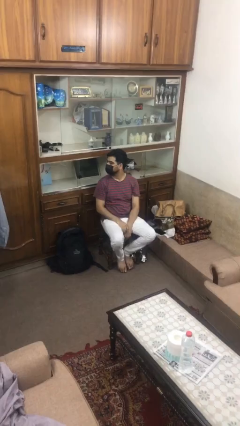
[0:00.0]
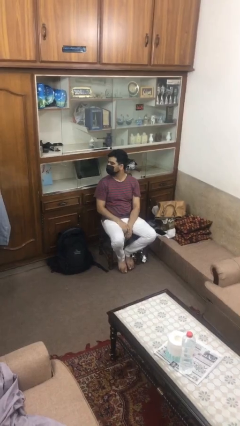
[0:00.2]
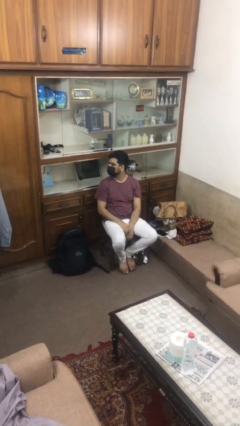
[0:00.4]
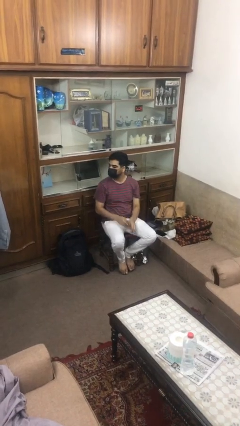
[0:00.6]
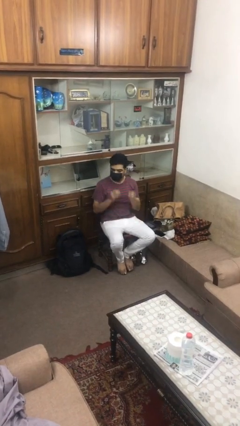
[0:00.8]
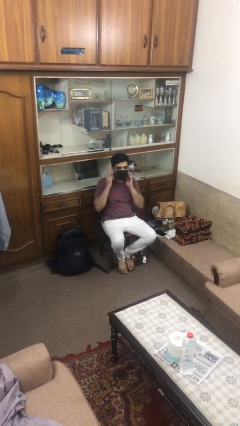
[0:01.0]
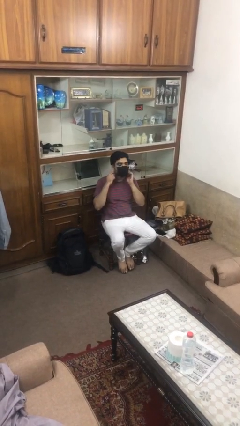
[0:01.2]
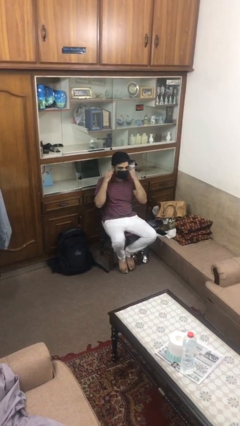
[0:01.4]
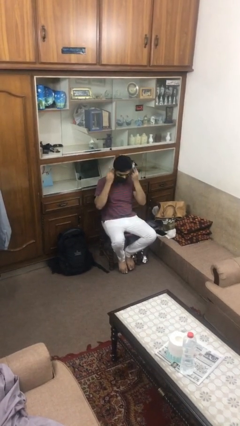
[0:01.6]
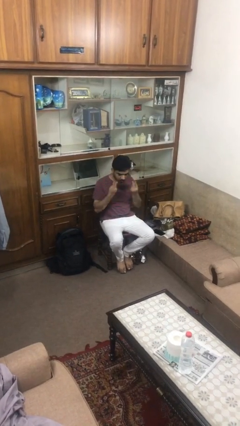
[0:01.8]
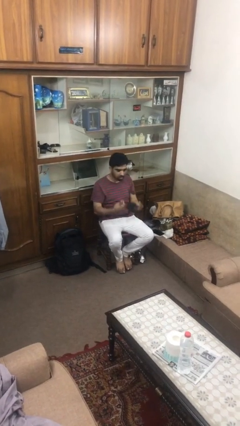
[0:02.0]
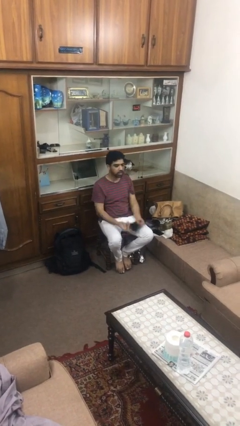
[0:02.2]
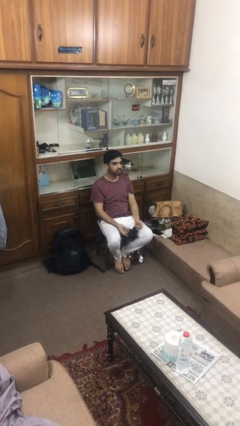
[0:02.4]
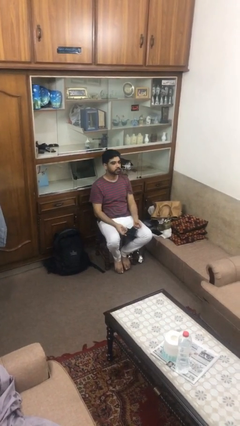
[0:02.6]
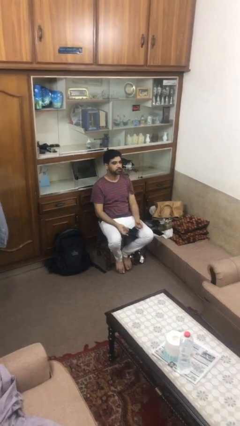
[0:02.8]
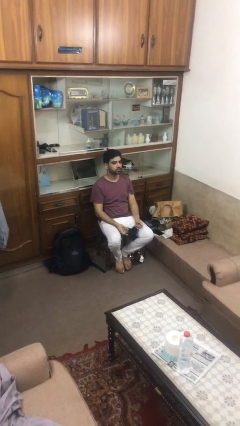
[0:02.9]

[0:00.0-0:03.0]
person takes off facemask

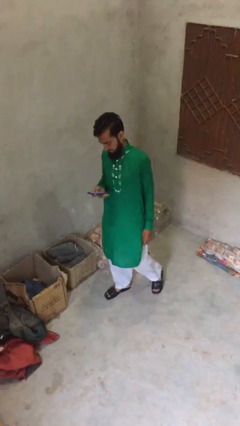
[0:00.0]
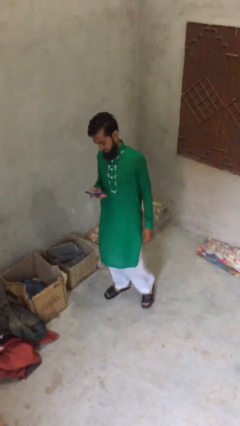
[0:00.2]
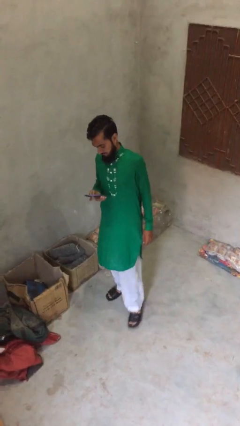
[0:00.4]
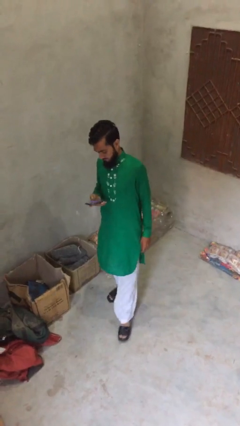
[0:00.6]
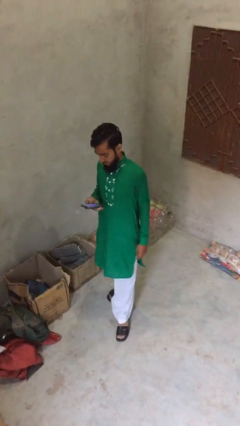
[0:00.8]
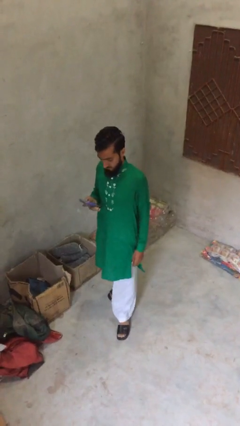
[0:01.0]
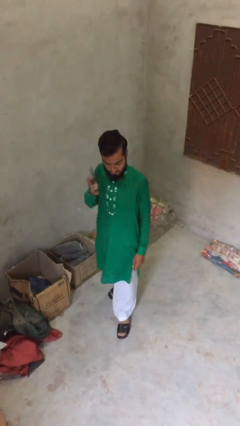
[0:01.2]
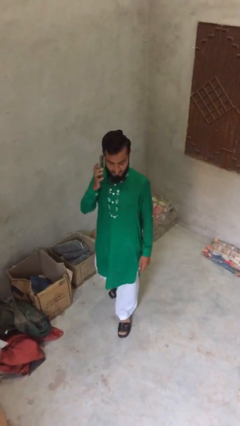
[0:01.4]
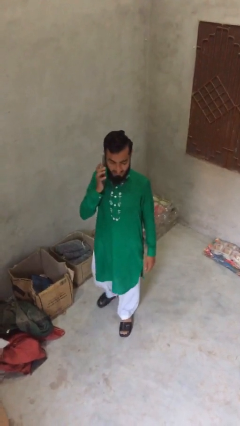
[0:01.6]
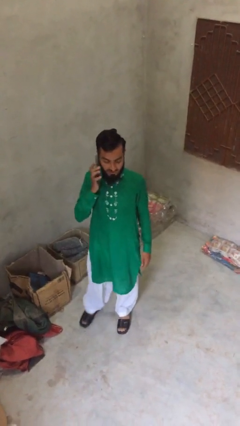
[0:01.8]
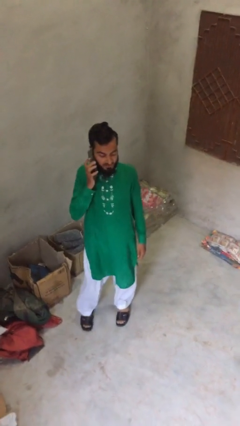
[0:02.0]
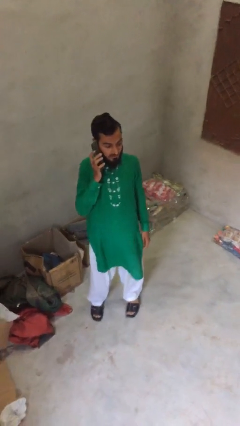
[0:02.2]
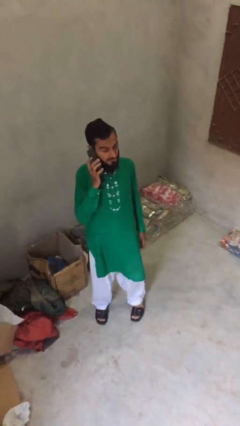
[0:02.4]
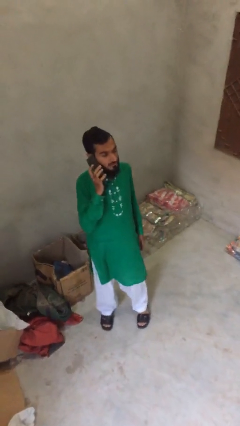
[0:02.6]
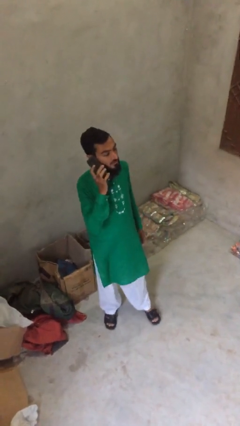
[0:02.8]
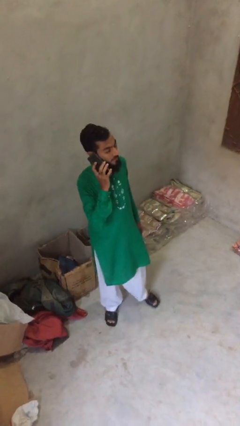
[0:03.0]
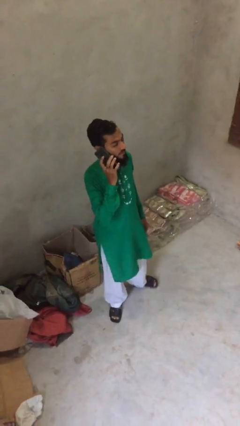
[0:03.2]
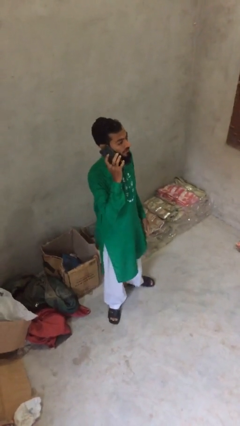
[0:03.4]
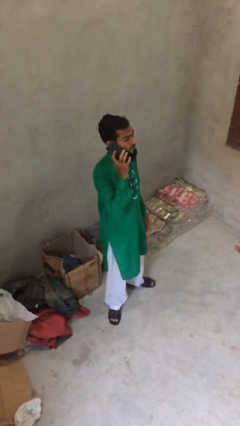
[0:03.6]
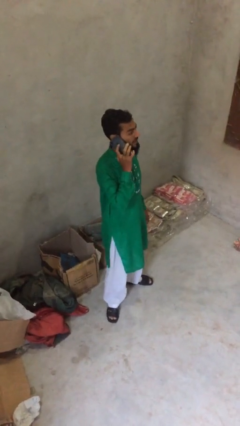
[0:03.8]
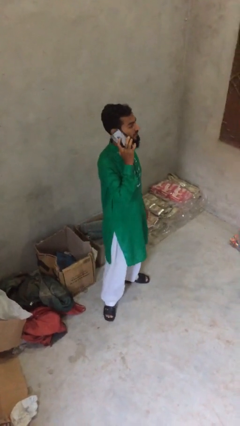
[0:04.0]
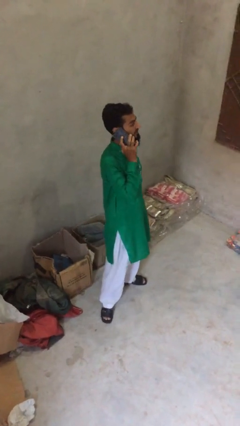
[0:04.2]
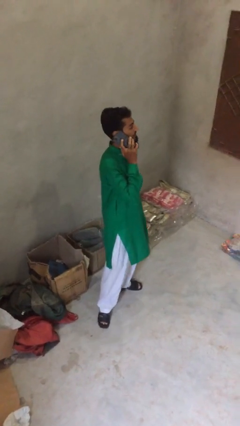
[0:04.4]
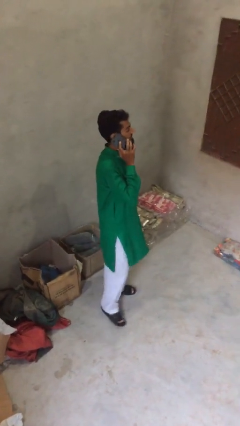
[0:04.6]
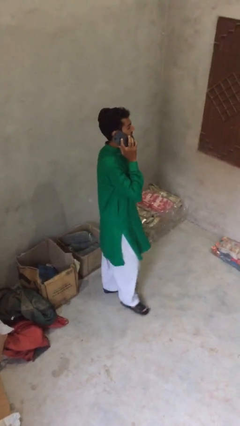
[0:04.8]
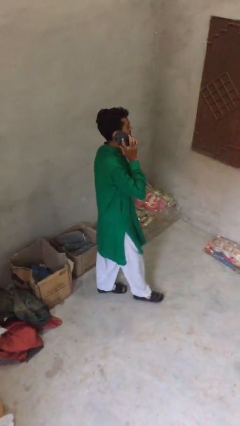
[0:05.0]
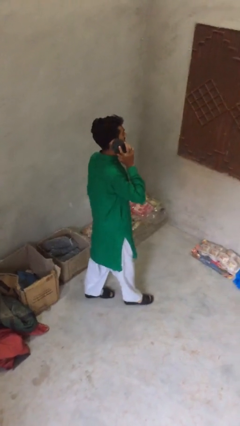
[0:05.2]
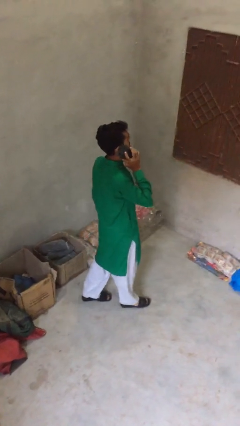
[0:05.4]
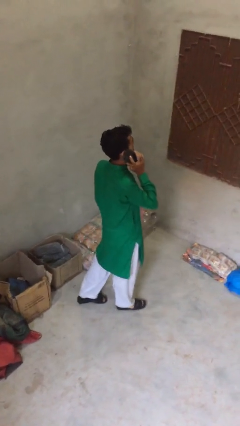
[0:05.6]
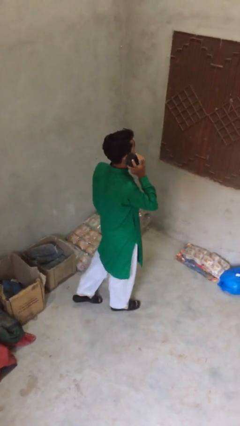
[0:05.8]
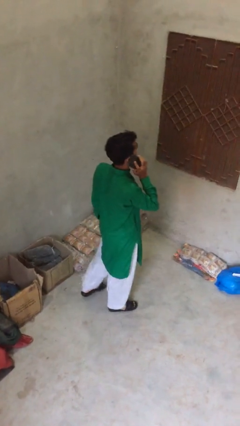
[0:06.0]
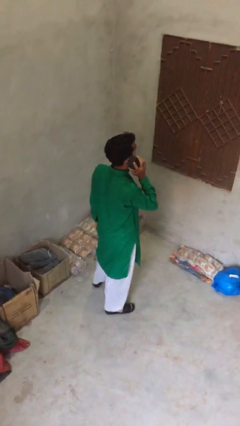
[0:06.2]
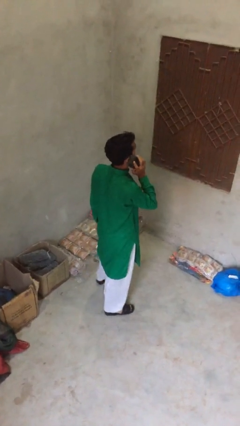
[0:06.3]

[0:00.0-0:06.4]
person talks on phone

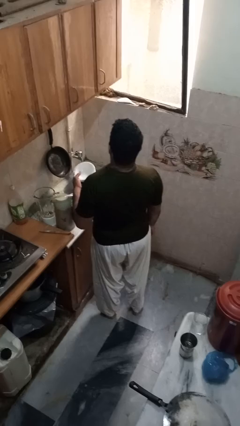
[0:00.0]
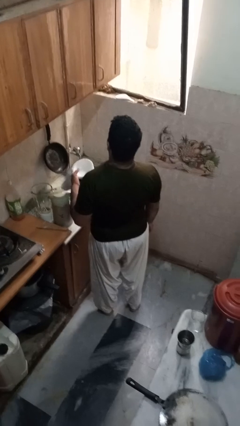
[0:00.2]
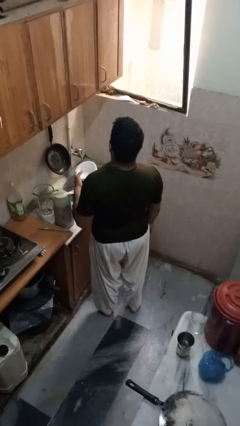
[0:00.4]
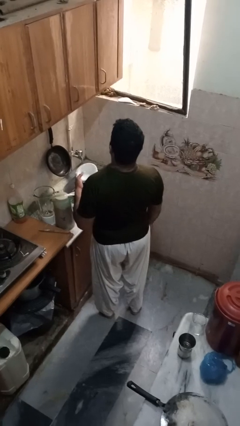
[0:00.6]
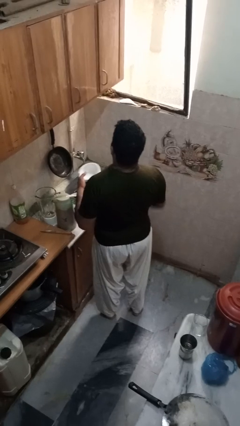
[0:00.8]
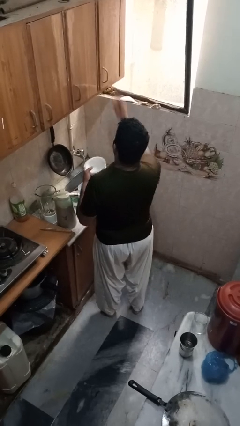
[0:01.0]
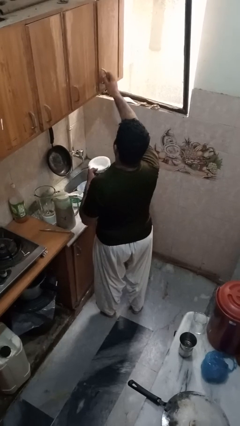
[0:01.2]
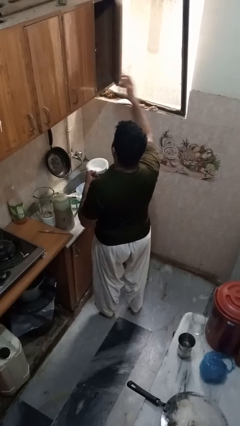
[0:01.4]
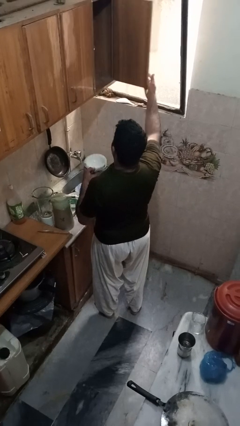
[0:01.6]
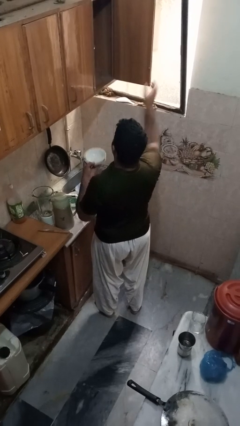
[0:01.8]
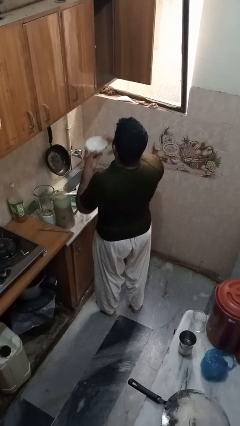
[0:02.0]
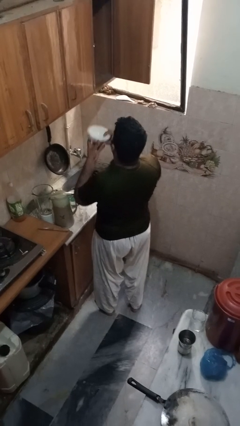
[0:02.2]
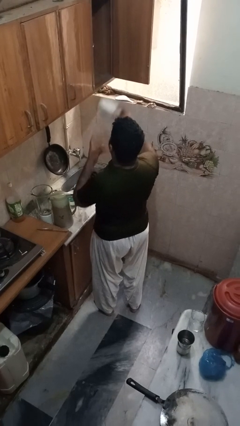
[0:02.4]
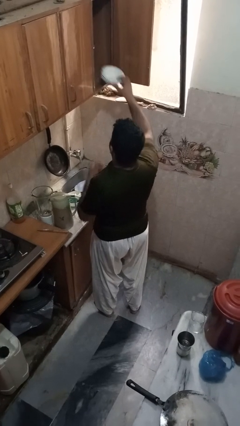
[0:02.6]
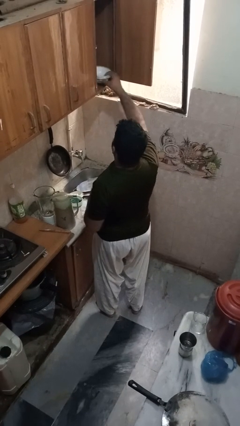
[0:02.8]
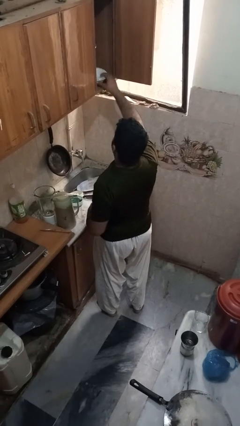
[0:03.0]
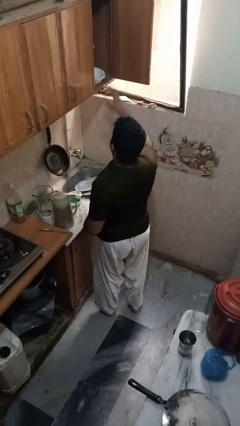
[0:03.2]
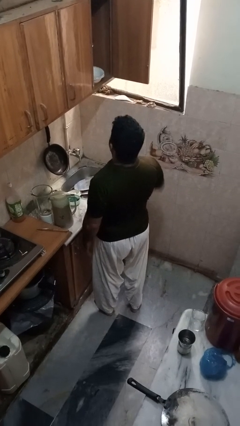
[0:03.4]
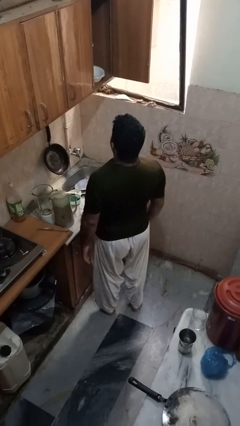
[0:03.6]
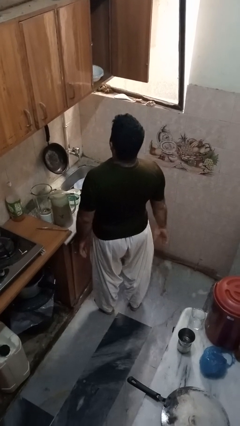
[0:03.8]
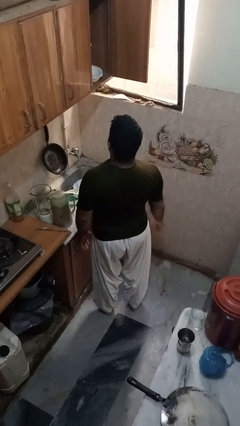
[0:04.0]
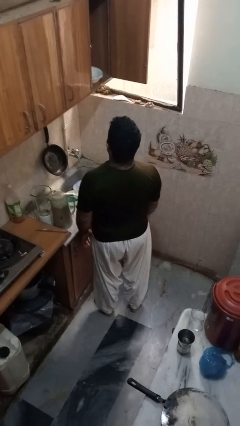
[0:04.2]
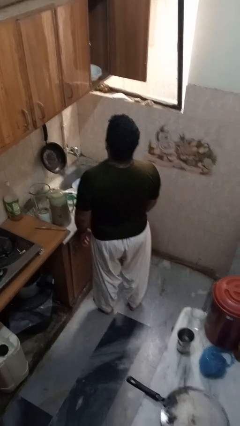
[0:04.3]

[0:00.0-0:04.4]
person puts object in cabinet

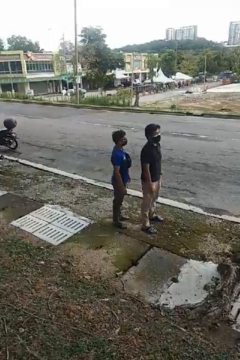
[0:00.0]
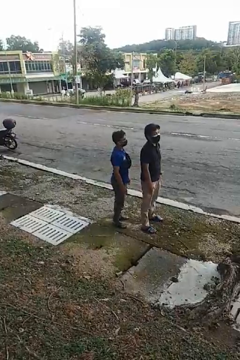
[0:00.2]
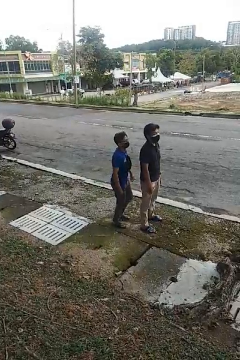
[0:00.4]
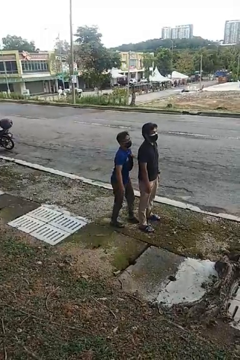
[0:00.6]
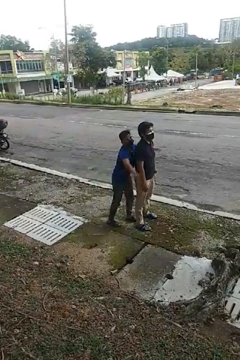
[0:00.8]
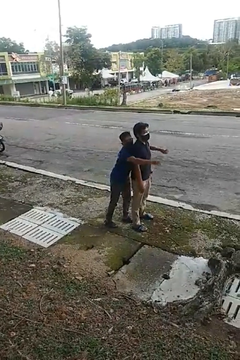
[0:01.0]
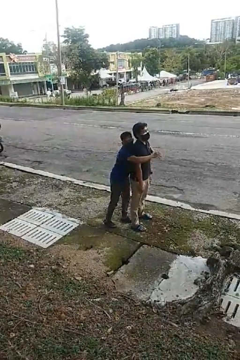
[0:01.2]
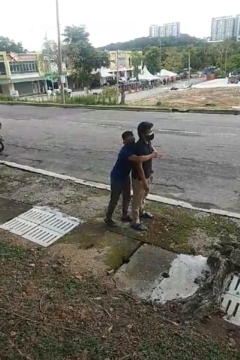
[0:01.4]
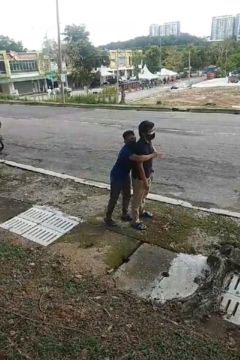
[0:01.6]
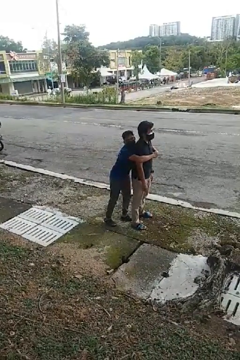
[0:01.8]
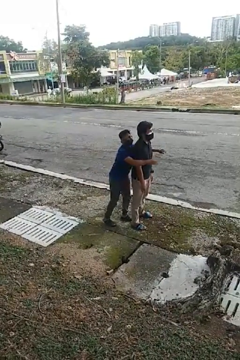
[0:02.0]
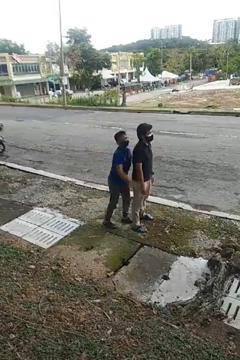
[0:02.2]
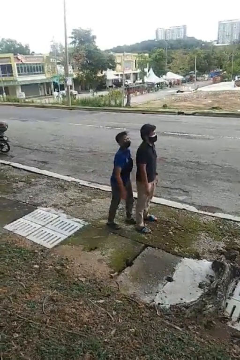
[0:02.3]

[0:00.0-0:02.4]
person hugs person from behind

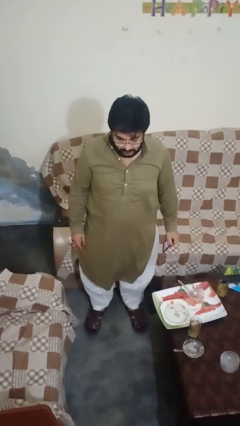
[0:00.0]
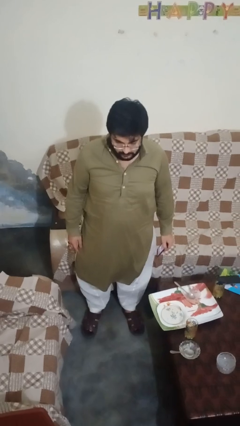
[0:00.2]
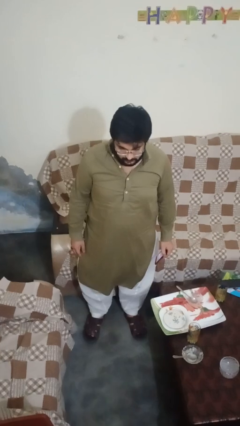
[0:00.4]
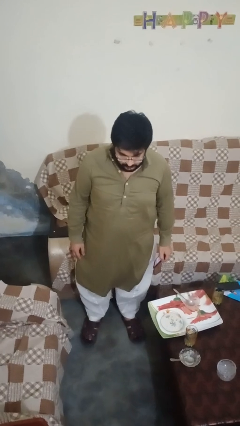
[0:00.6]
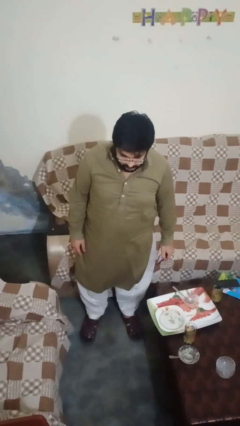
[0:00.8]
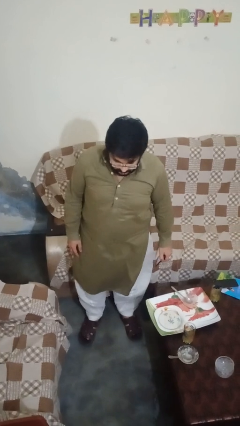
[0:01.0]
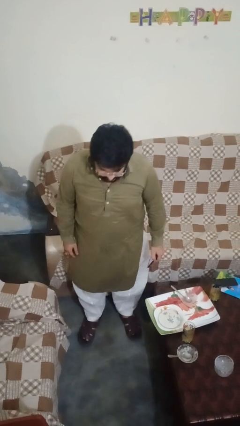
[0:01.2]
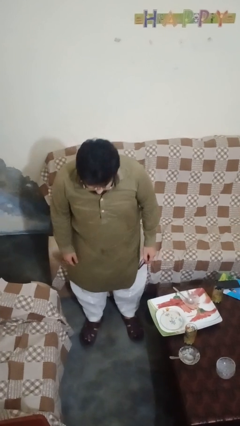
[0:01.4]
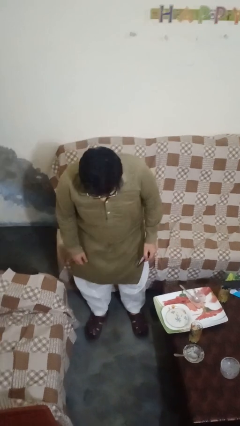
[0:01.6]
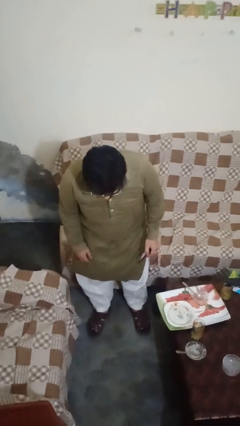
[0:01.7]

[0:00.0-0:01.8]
person stands up
